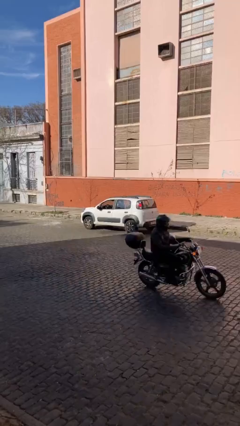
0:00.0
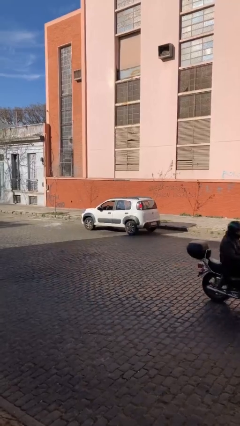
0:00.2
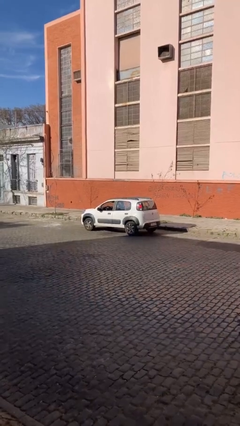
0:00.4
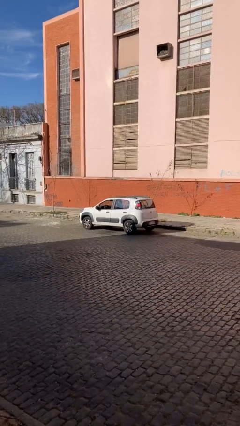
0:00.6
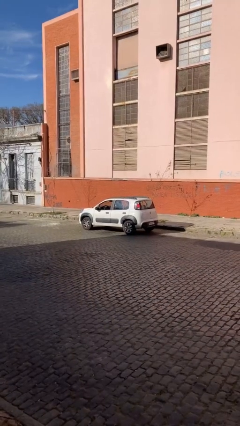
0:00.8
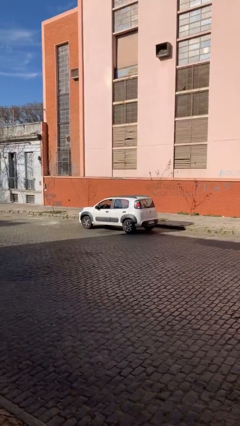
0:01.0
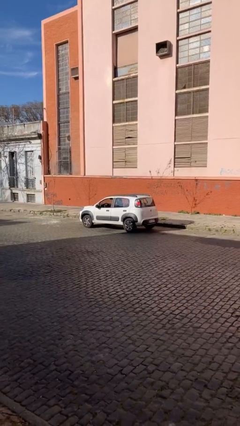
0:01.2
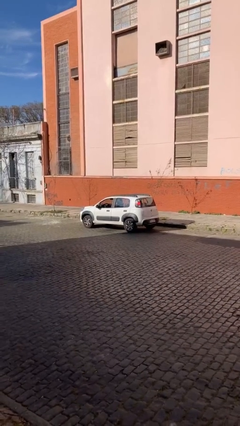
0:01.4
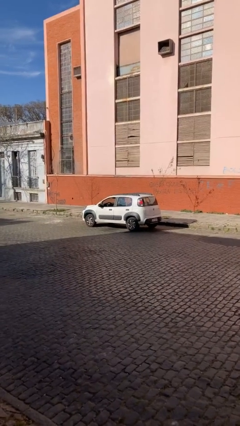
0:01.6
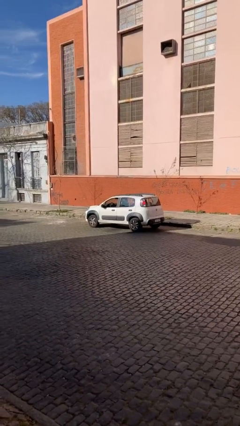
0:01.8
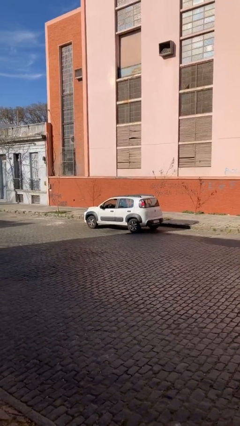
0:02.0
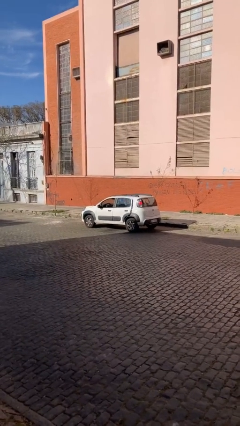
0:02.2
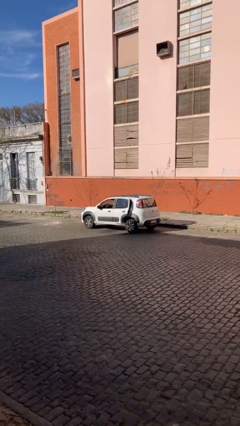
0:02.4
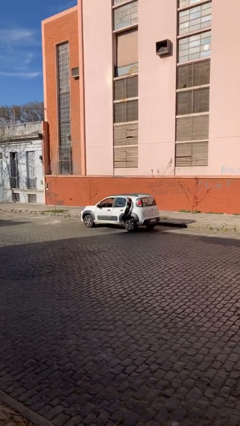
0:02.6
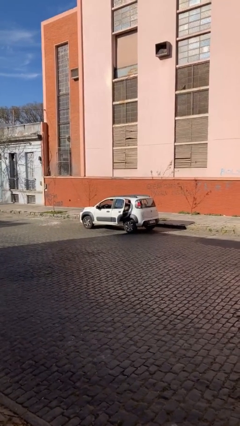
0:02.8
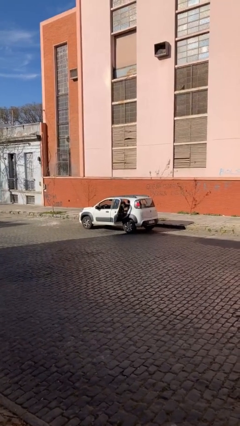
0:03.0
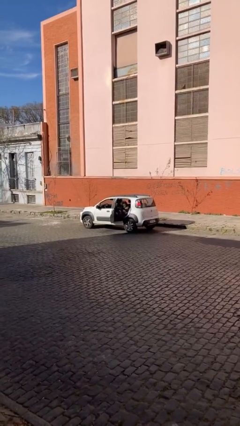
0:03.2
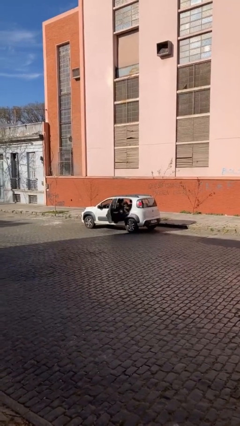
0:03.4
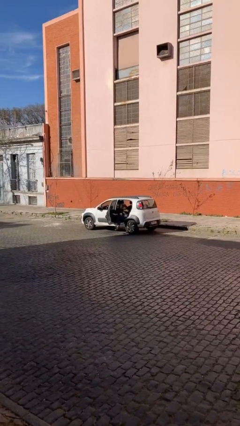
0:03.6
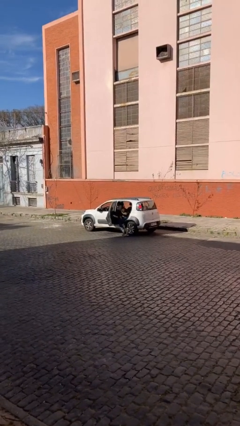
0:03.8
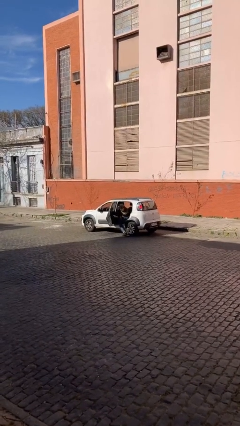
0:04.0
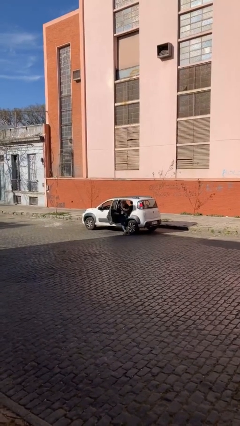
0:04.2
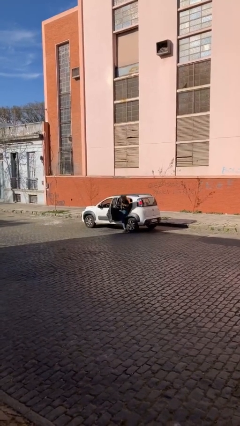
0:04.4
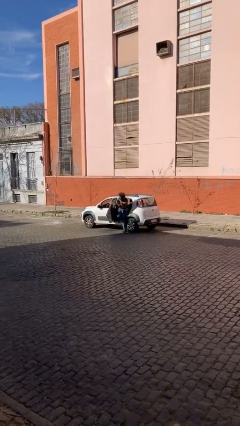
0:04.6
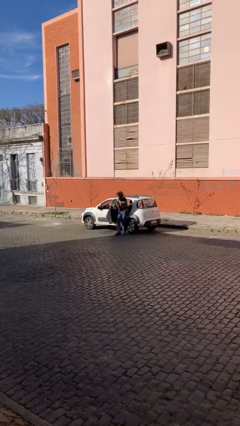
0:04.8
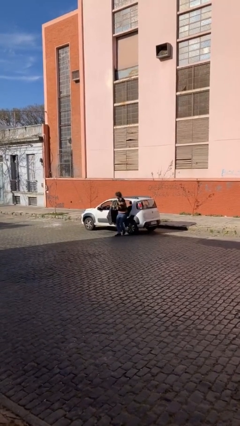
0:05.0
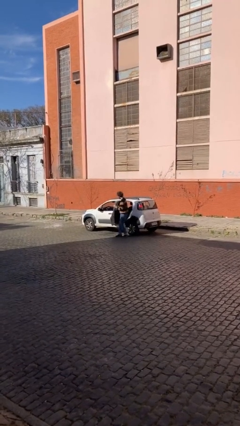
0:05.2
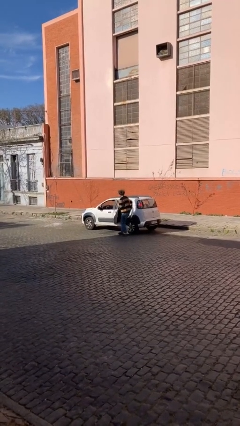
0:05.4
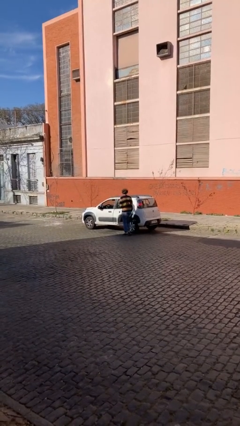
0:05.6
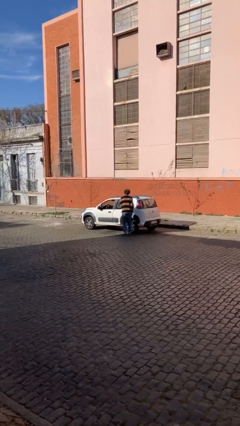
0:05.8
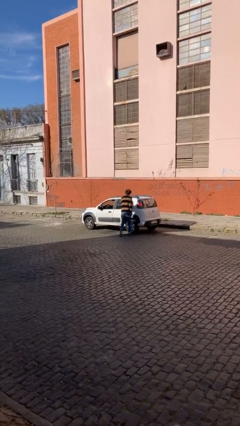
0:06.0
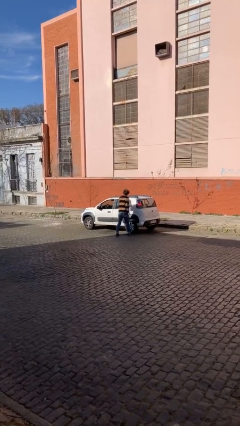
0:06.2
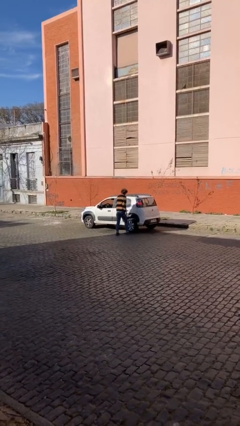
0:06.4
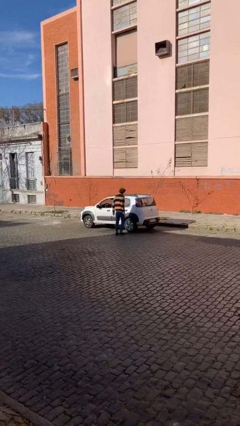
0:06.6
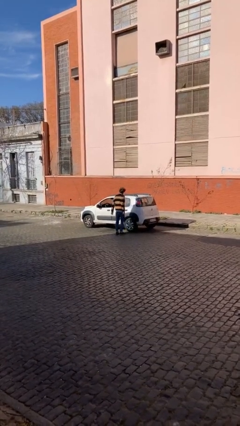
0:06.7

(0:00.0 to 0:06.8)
car drops off person

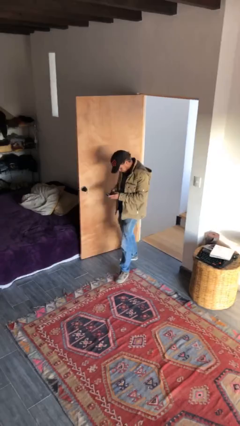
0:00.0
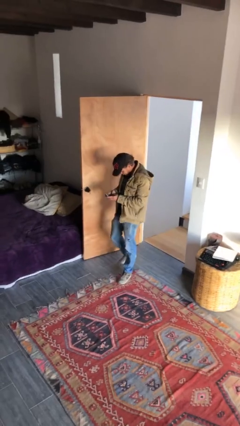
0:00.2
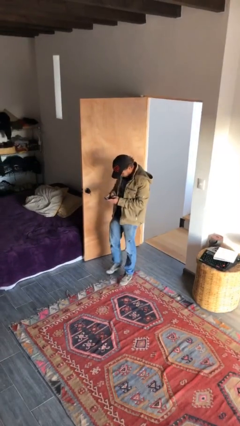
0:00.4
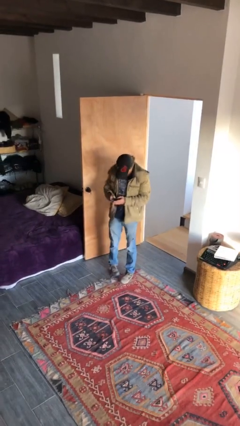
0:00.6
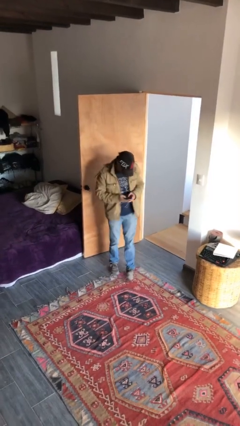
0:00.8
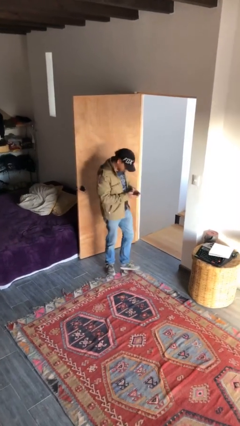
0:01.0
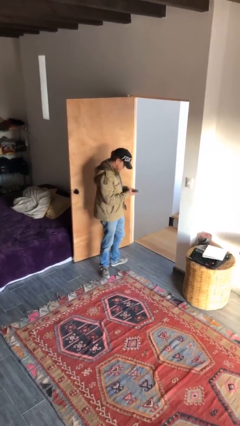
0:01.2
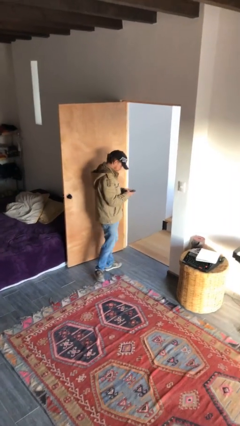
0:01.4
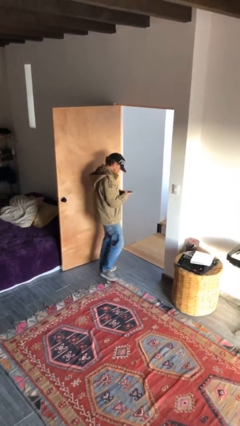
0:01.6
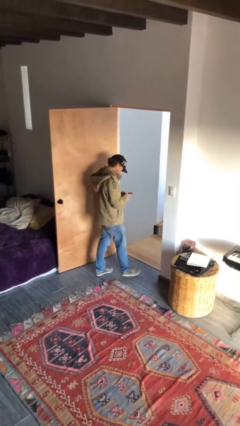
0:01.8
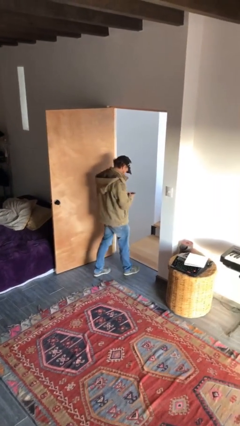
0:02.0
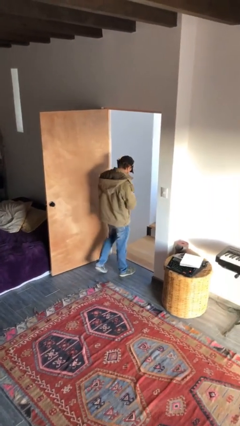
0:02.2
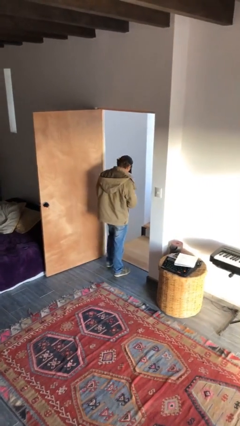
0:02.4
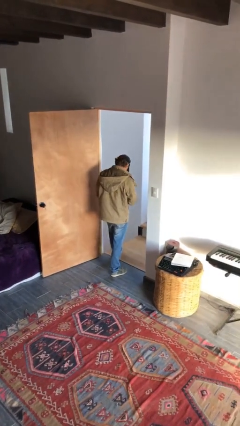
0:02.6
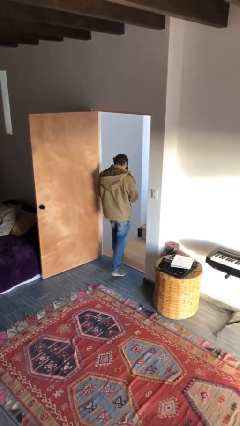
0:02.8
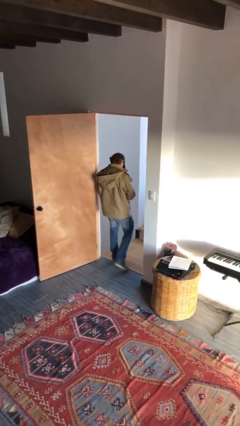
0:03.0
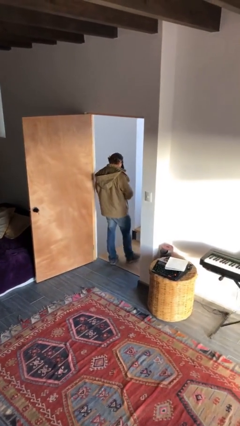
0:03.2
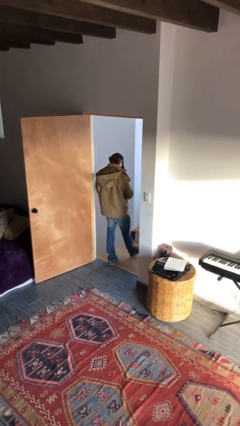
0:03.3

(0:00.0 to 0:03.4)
person exits scene through structure

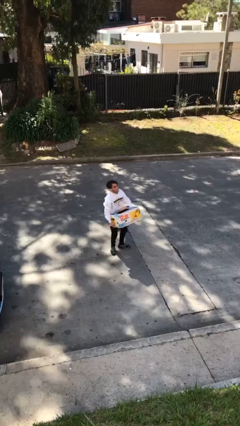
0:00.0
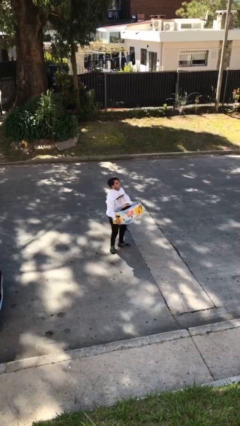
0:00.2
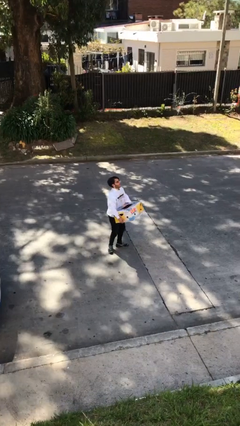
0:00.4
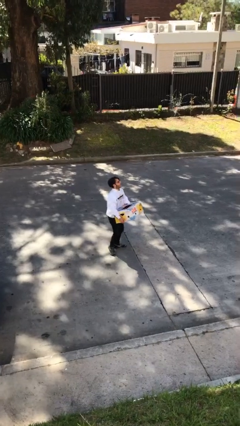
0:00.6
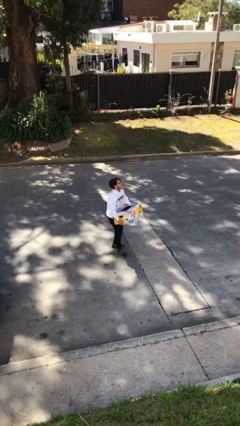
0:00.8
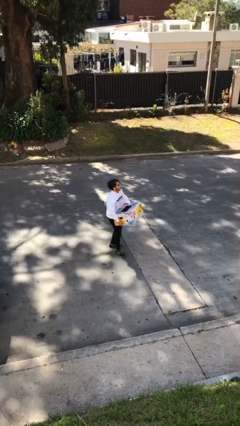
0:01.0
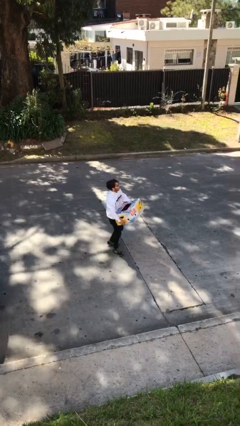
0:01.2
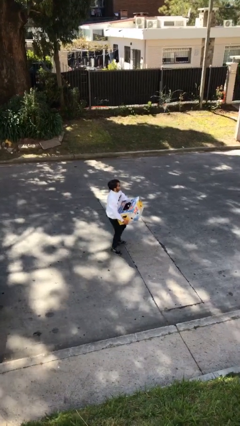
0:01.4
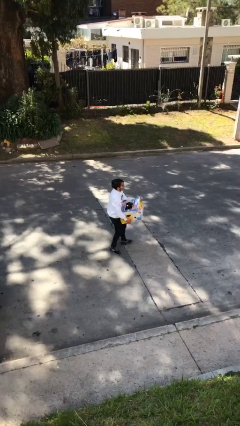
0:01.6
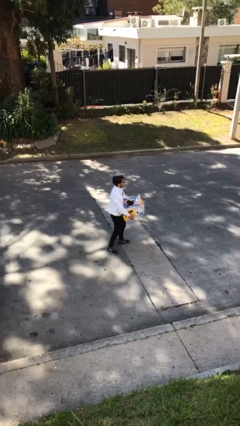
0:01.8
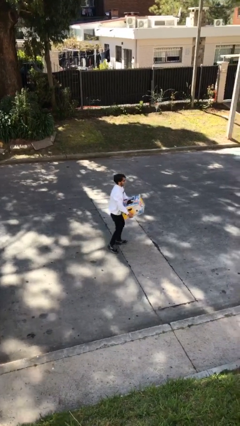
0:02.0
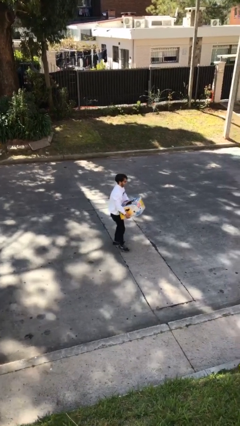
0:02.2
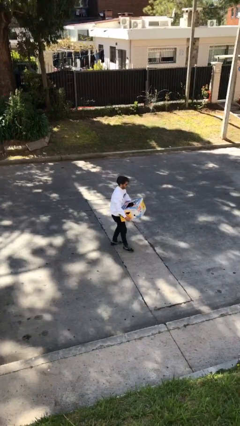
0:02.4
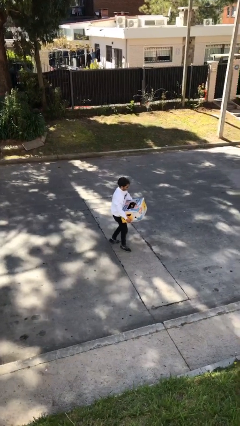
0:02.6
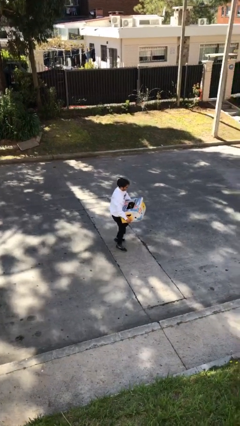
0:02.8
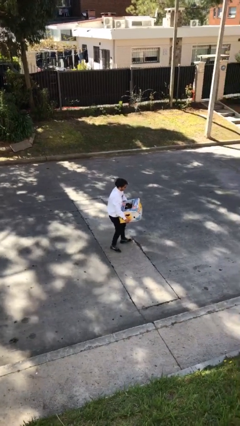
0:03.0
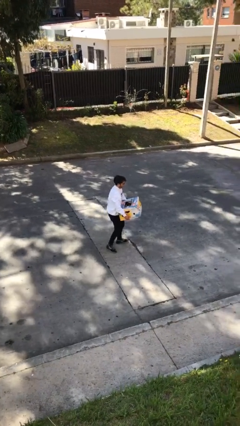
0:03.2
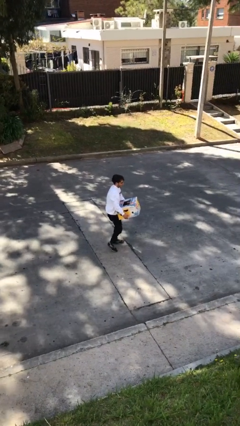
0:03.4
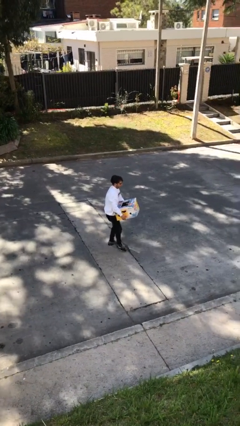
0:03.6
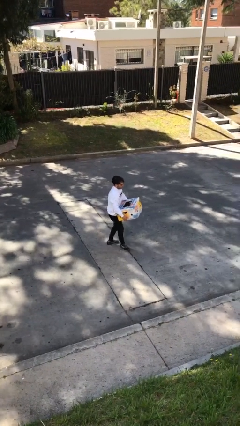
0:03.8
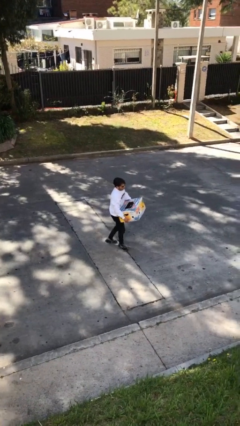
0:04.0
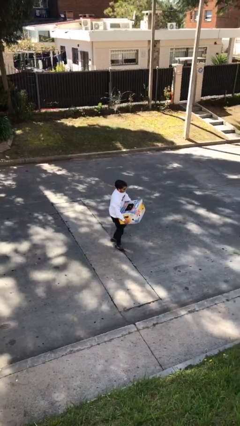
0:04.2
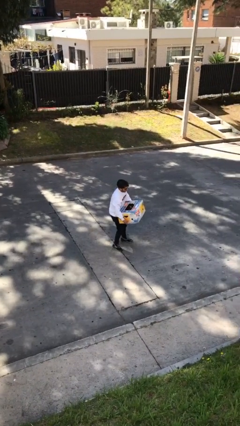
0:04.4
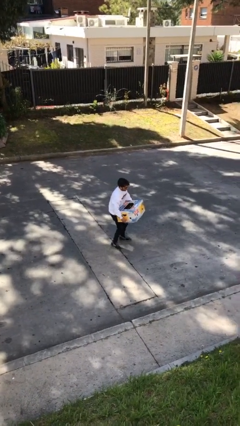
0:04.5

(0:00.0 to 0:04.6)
person carries heavy object

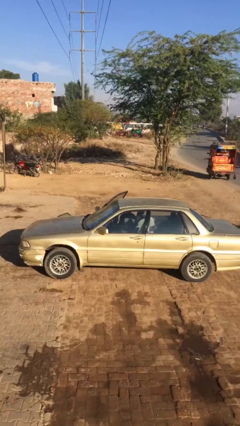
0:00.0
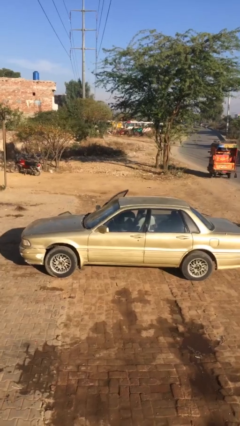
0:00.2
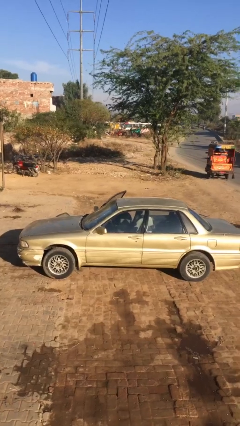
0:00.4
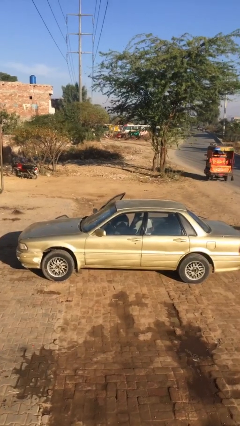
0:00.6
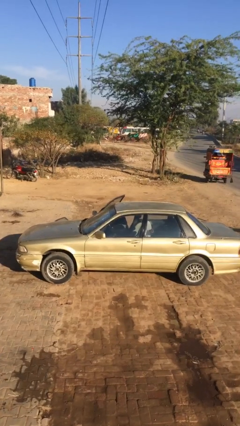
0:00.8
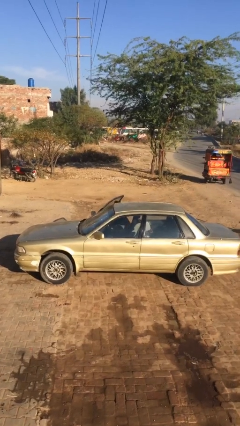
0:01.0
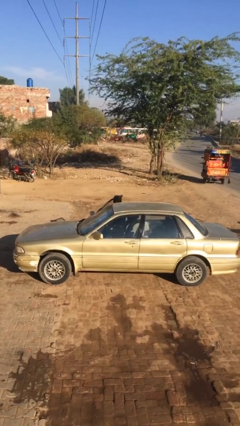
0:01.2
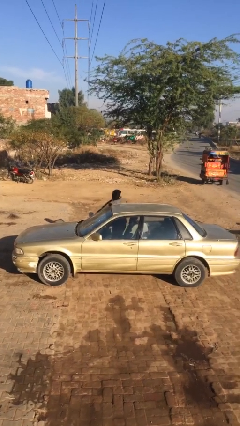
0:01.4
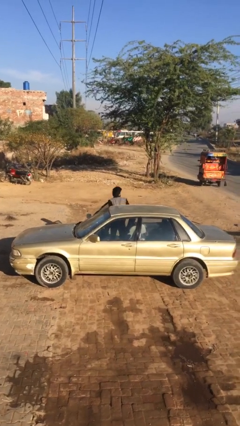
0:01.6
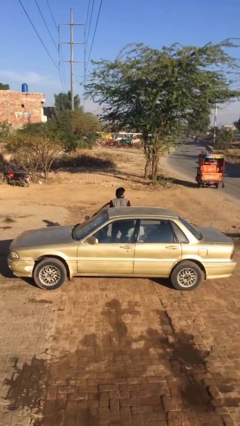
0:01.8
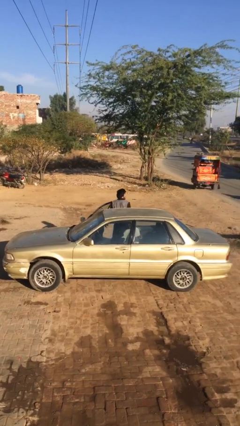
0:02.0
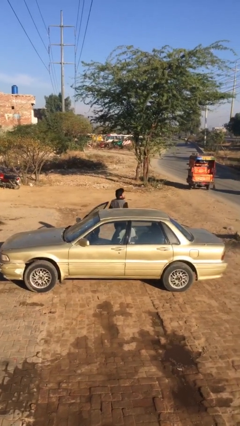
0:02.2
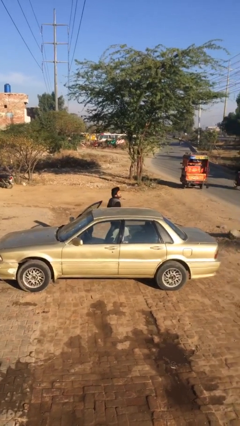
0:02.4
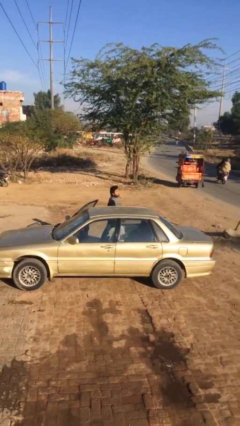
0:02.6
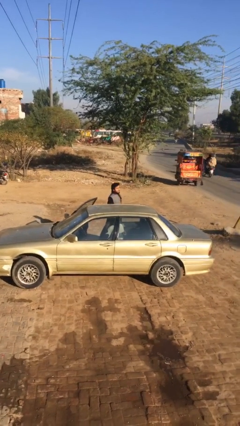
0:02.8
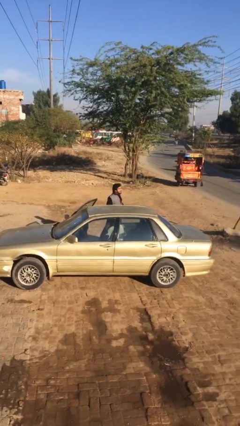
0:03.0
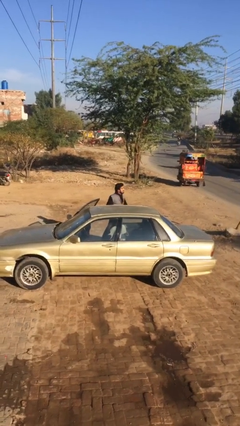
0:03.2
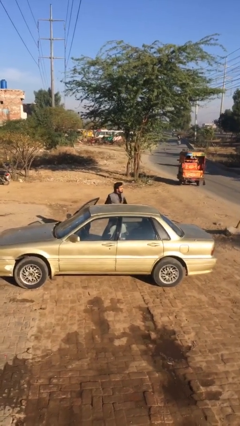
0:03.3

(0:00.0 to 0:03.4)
person exits car
